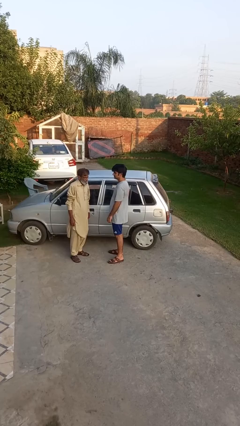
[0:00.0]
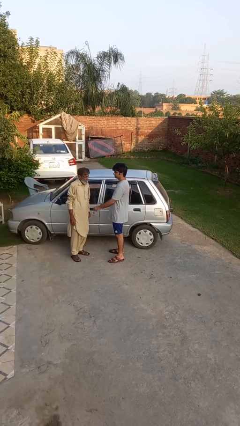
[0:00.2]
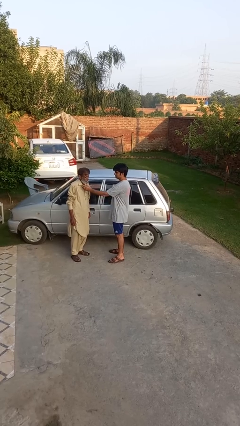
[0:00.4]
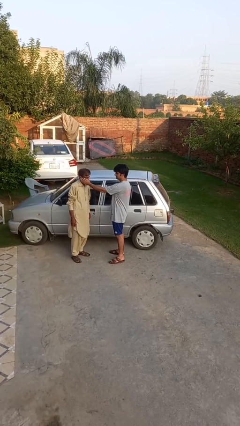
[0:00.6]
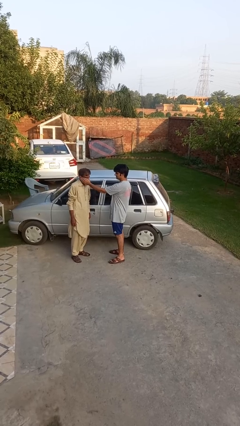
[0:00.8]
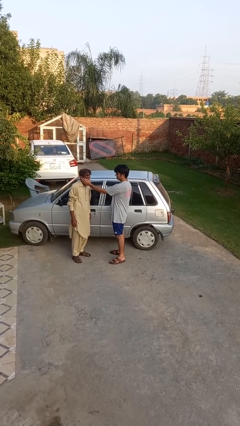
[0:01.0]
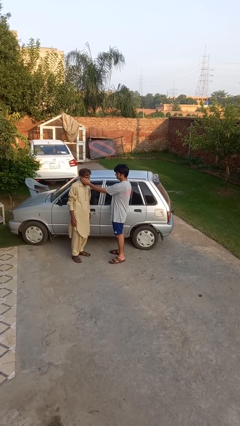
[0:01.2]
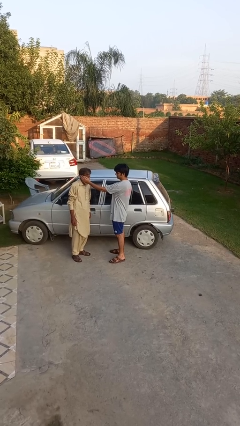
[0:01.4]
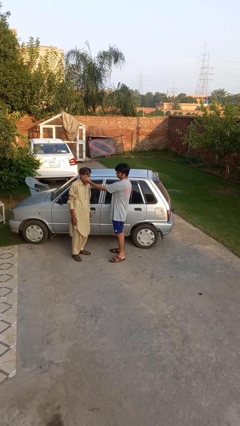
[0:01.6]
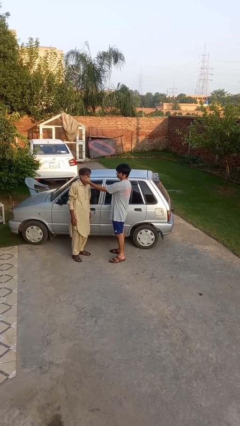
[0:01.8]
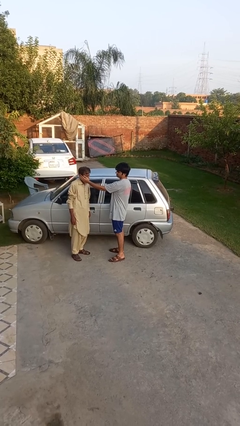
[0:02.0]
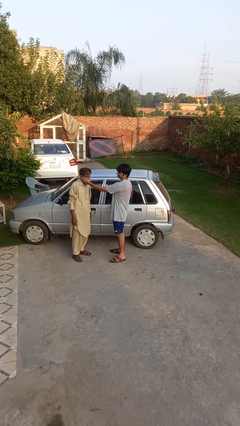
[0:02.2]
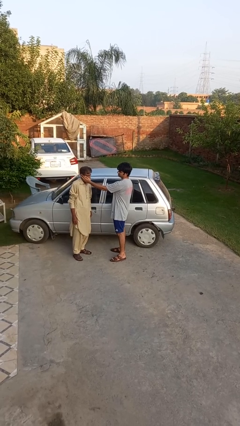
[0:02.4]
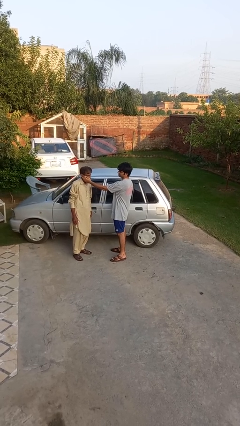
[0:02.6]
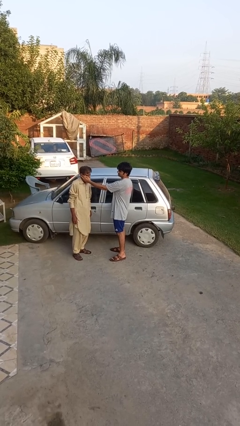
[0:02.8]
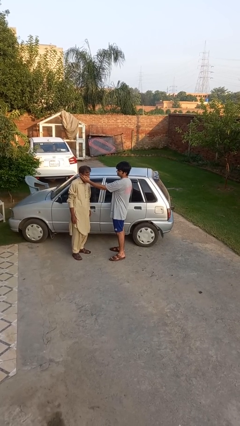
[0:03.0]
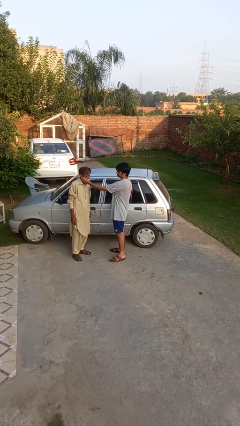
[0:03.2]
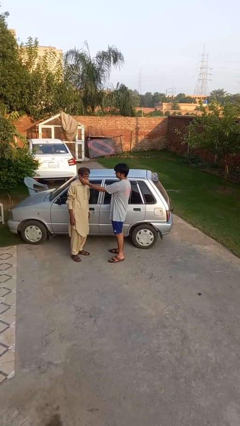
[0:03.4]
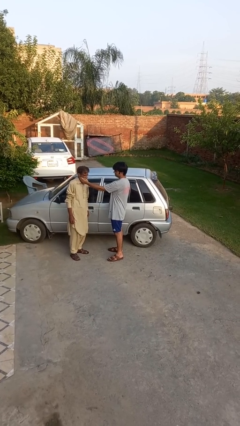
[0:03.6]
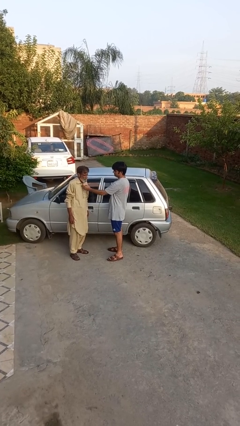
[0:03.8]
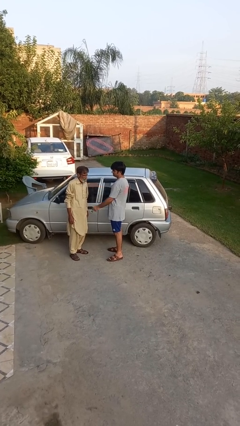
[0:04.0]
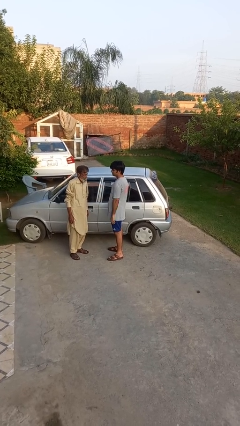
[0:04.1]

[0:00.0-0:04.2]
person touches face of person

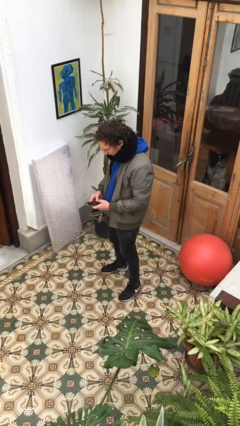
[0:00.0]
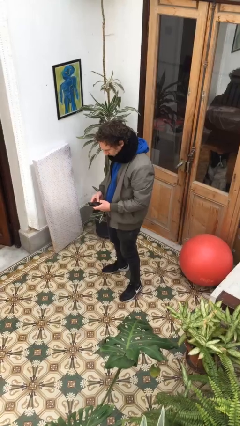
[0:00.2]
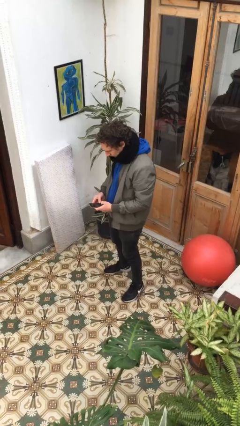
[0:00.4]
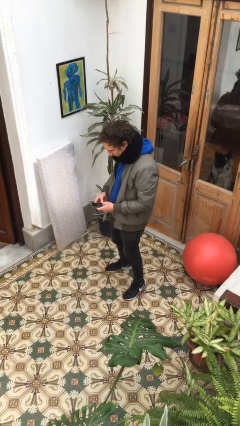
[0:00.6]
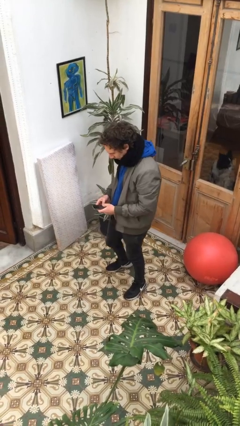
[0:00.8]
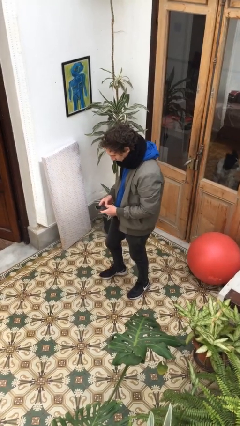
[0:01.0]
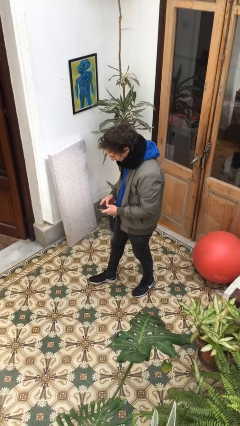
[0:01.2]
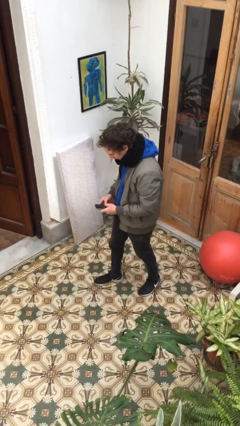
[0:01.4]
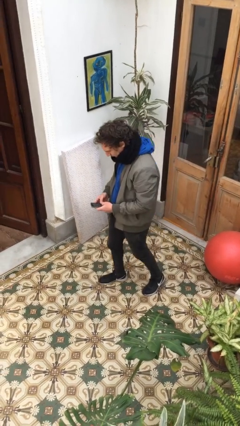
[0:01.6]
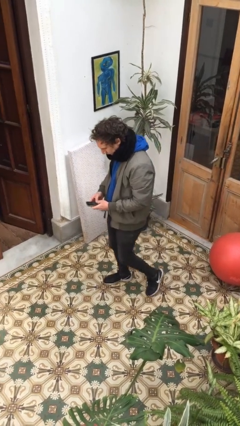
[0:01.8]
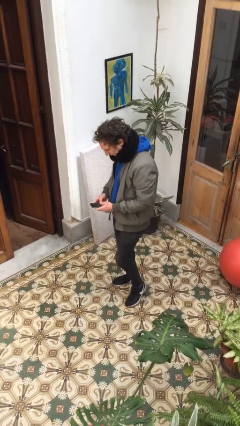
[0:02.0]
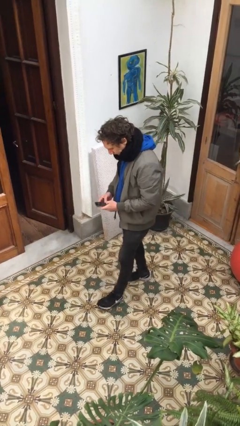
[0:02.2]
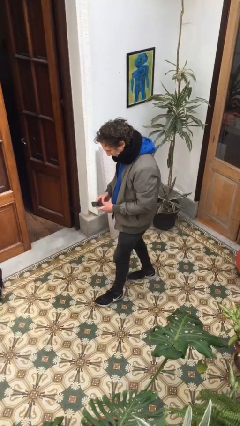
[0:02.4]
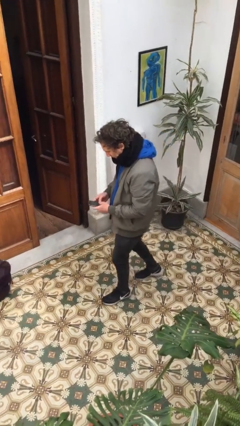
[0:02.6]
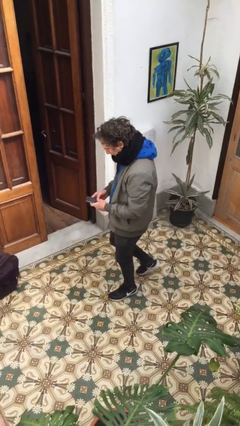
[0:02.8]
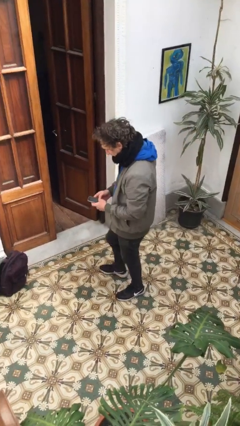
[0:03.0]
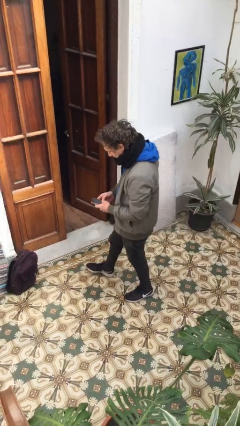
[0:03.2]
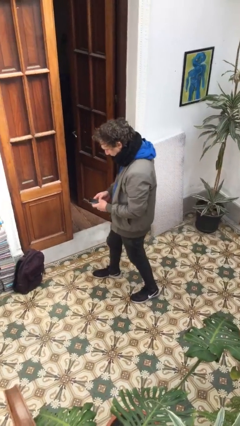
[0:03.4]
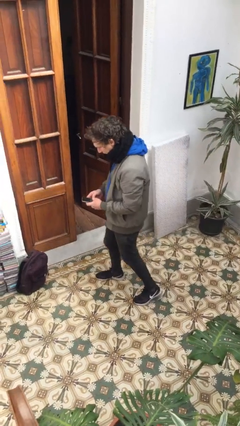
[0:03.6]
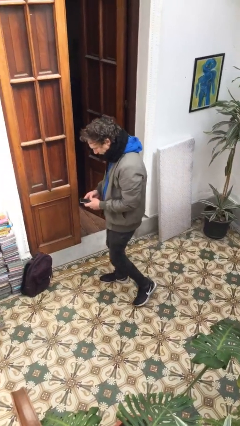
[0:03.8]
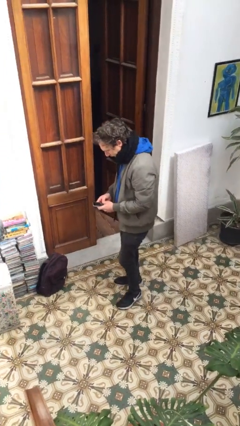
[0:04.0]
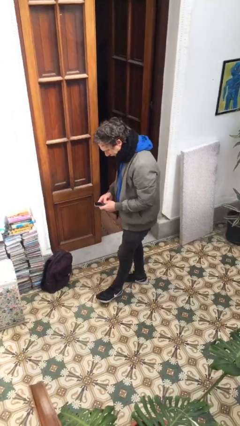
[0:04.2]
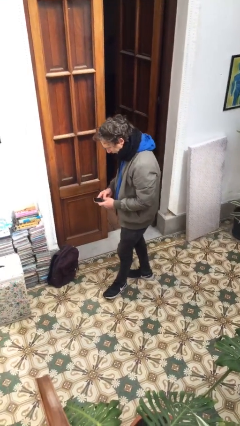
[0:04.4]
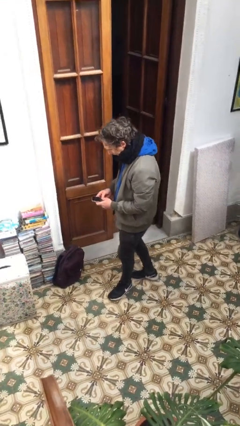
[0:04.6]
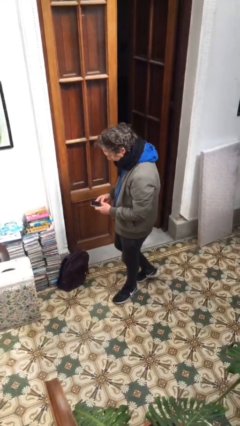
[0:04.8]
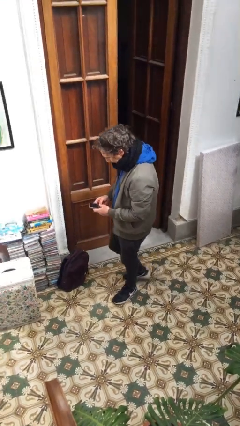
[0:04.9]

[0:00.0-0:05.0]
person texts on phone

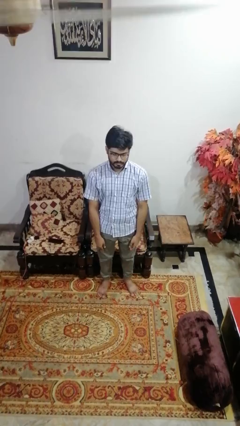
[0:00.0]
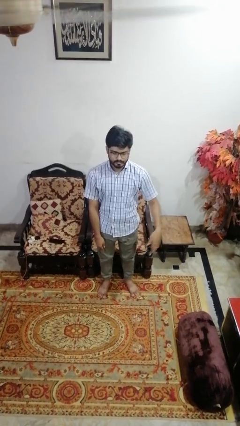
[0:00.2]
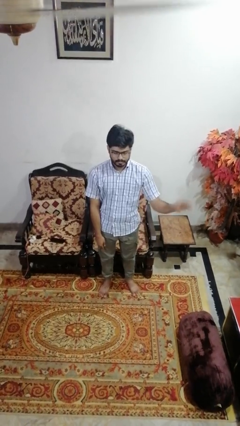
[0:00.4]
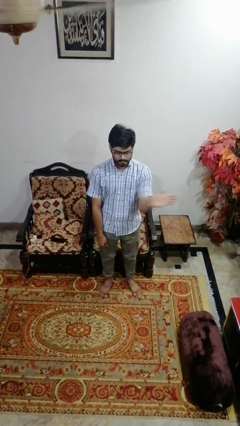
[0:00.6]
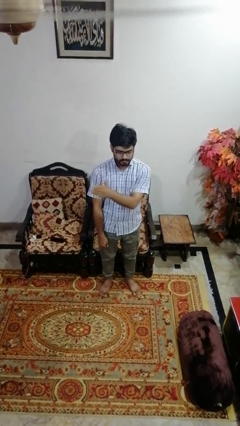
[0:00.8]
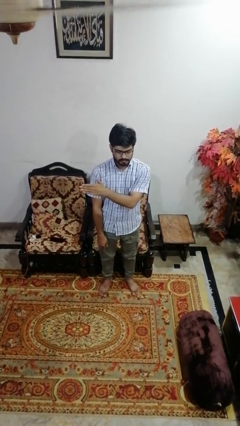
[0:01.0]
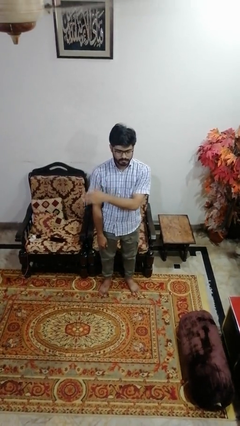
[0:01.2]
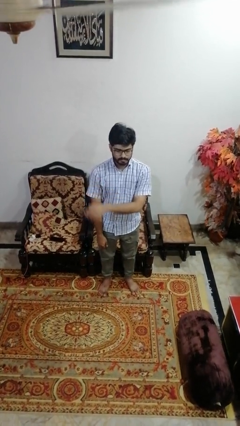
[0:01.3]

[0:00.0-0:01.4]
person gestures swipe right

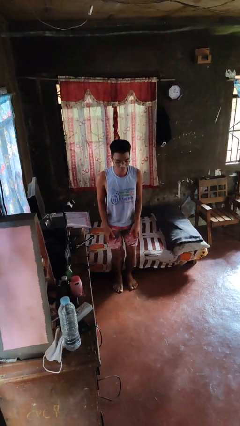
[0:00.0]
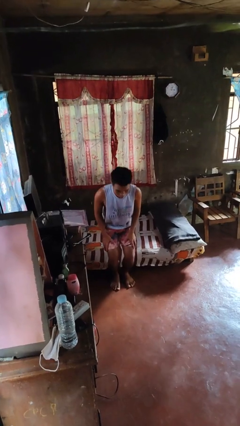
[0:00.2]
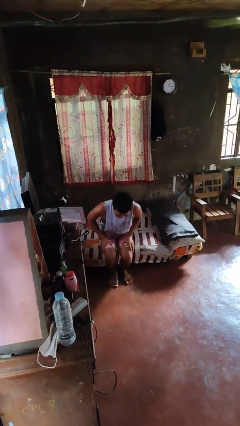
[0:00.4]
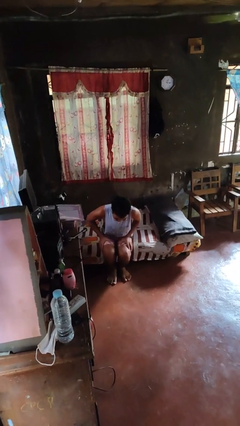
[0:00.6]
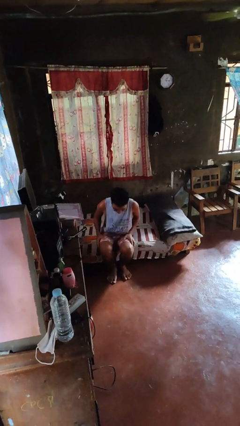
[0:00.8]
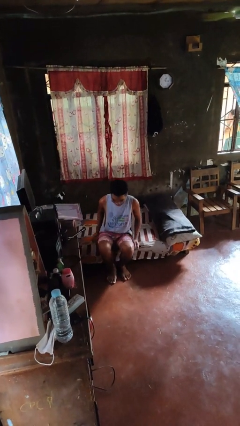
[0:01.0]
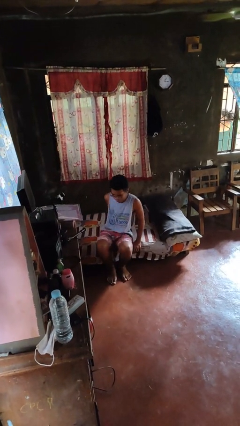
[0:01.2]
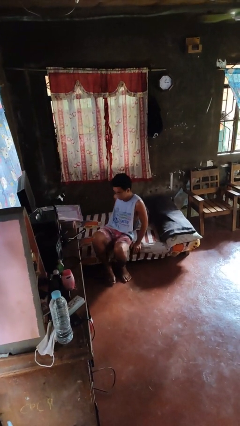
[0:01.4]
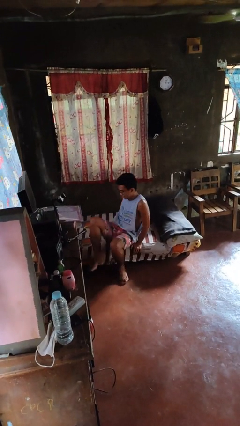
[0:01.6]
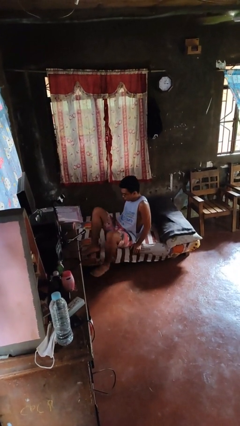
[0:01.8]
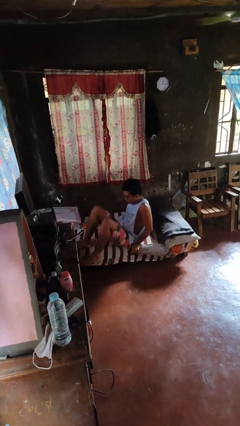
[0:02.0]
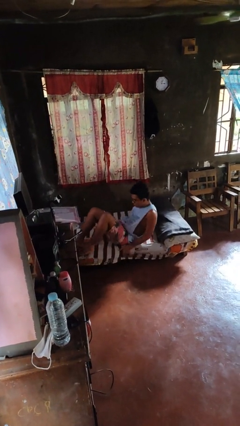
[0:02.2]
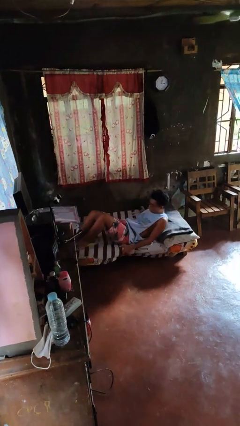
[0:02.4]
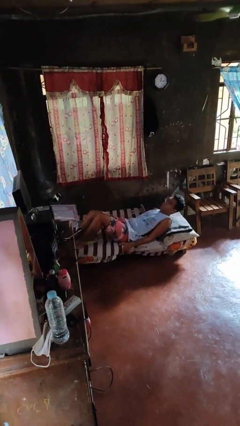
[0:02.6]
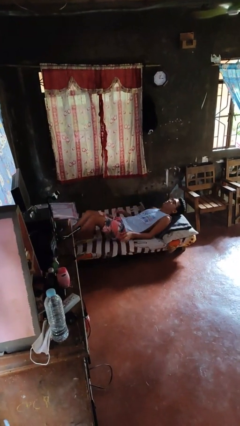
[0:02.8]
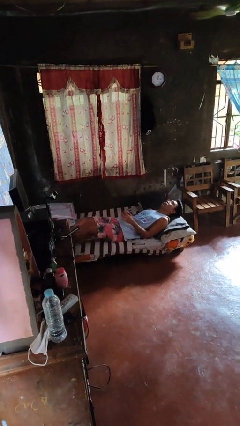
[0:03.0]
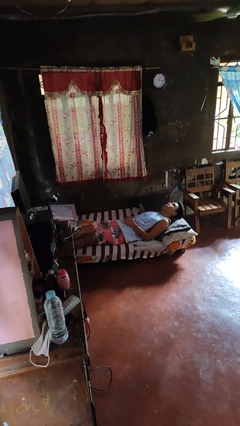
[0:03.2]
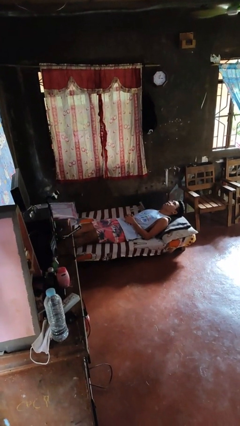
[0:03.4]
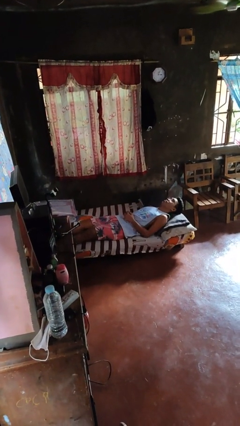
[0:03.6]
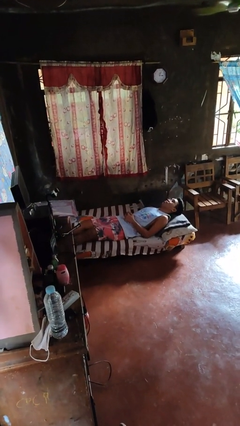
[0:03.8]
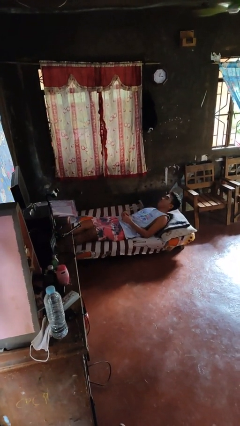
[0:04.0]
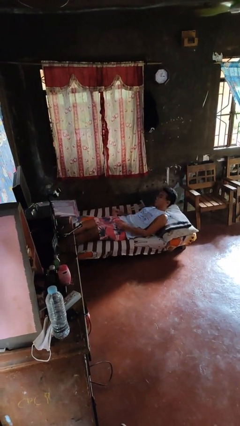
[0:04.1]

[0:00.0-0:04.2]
person lies down on bed

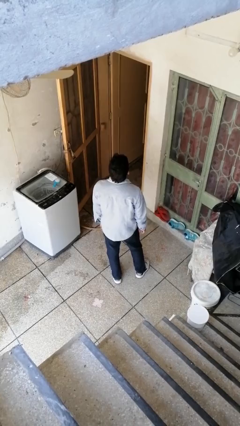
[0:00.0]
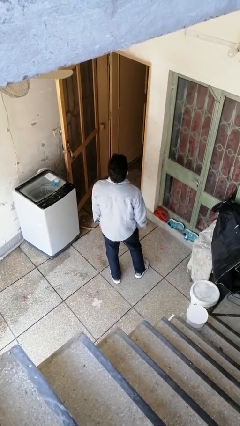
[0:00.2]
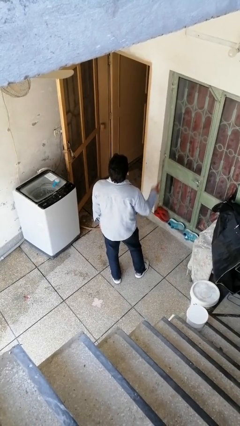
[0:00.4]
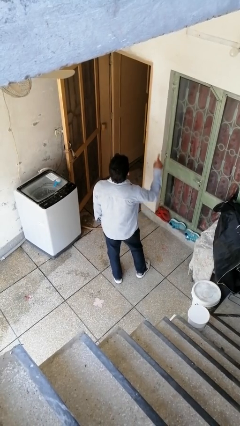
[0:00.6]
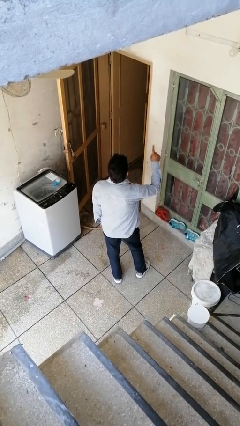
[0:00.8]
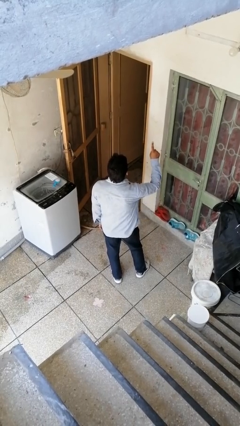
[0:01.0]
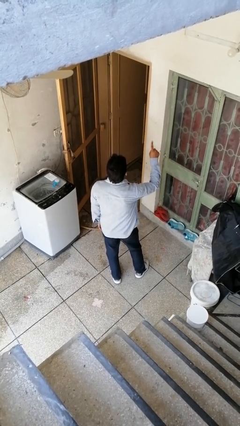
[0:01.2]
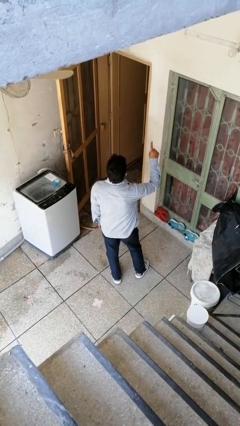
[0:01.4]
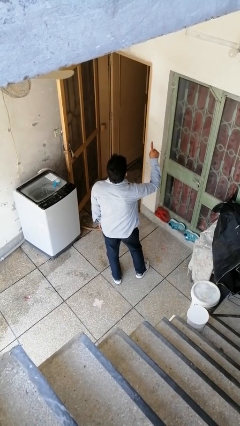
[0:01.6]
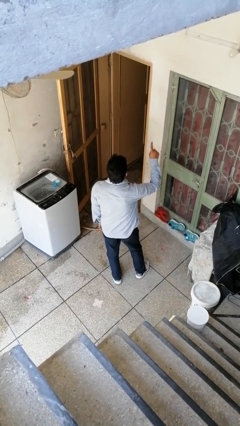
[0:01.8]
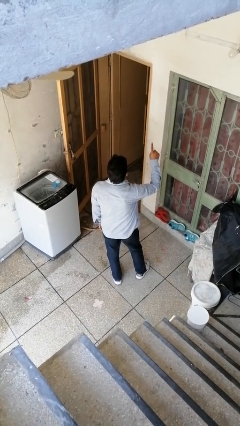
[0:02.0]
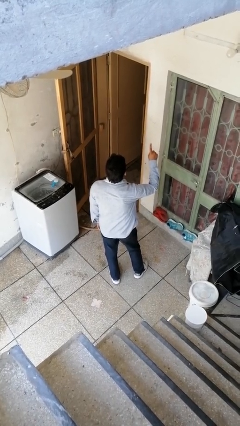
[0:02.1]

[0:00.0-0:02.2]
person gestures number one

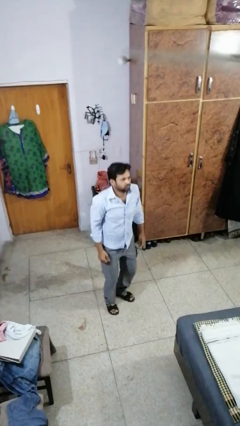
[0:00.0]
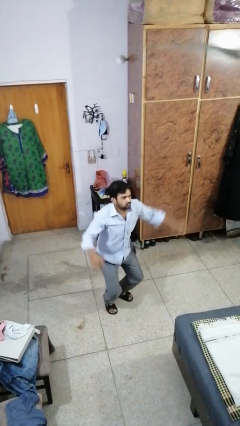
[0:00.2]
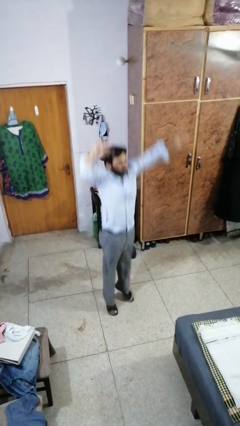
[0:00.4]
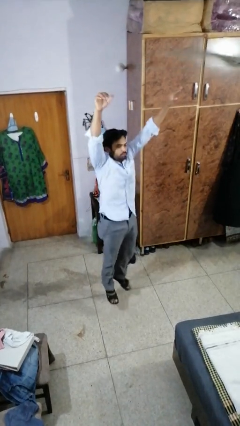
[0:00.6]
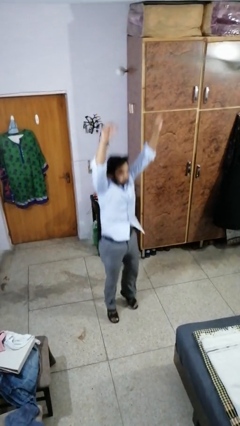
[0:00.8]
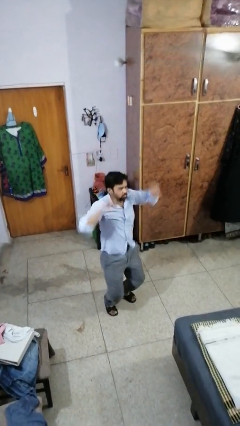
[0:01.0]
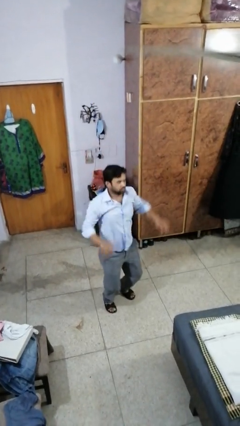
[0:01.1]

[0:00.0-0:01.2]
person jumps
